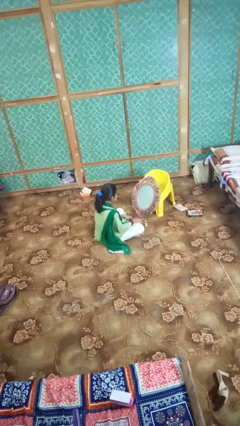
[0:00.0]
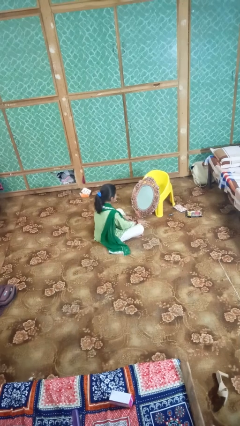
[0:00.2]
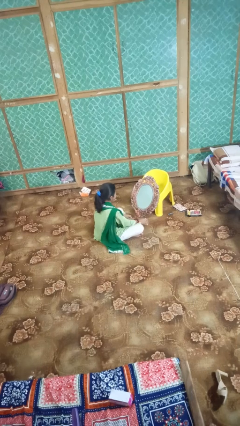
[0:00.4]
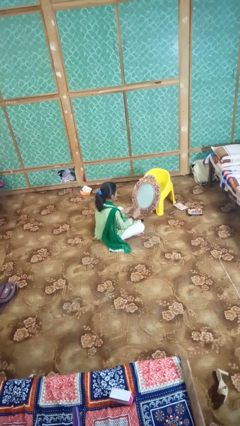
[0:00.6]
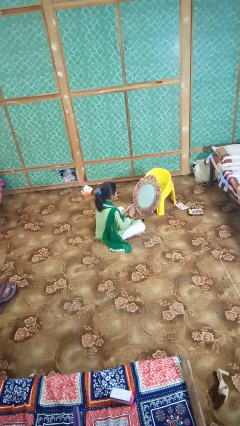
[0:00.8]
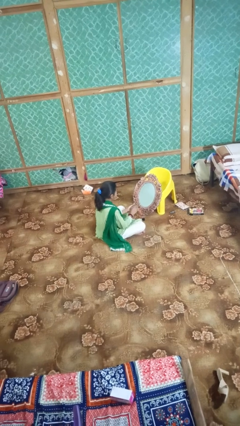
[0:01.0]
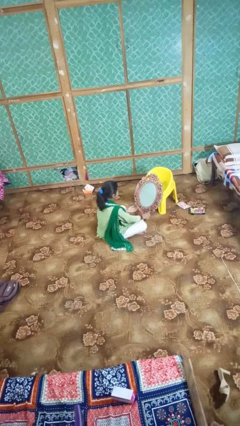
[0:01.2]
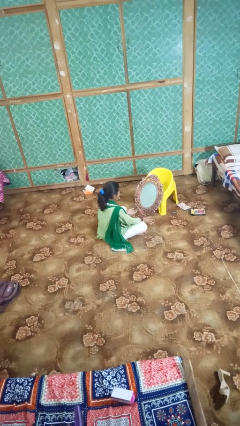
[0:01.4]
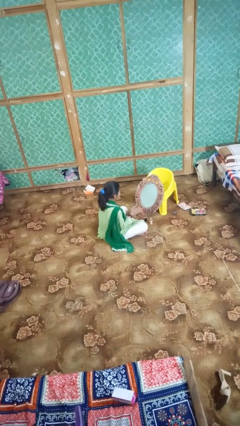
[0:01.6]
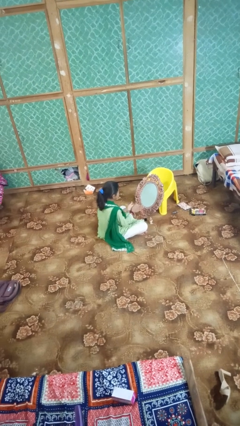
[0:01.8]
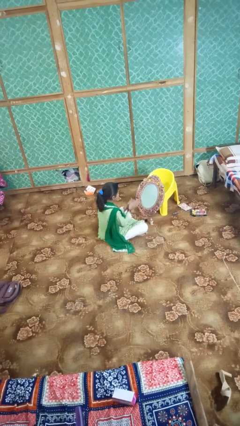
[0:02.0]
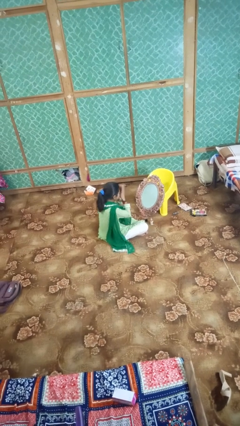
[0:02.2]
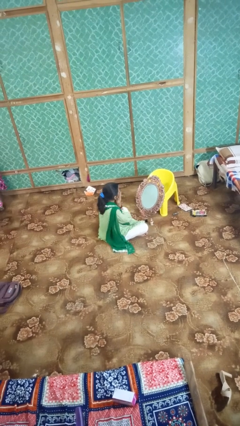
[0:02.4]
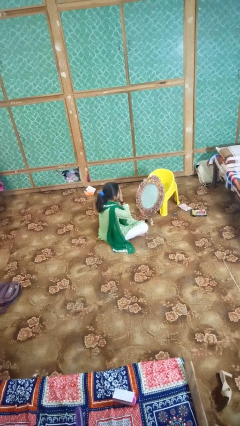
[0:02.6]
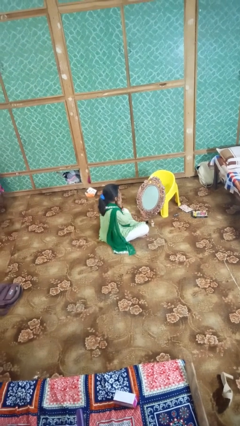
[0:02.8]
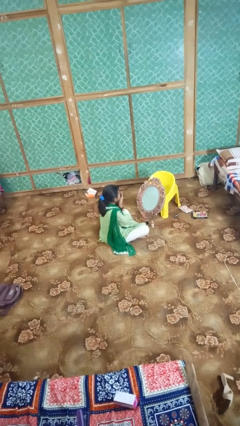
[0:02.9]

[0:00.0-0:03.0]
person applies foundation makeup

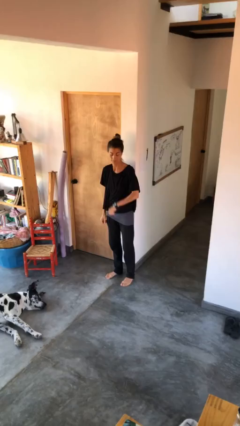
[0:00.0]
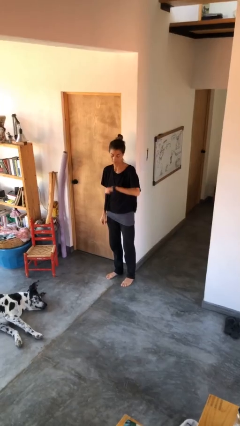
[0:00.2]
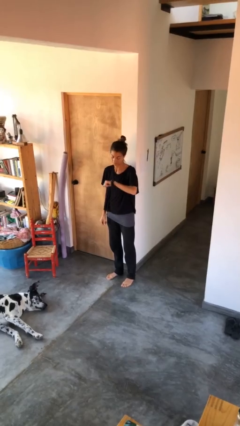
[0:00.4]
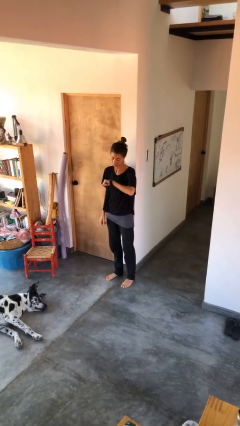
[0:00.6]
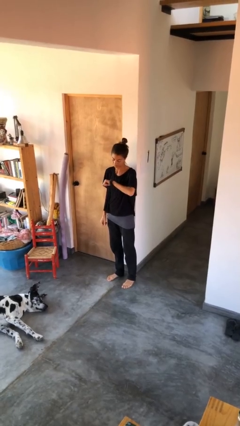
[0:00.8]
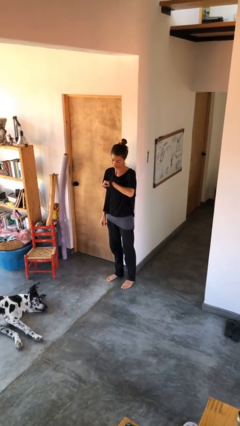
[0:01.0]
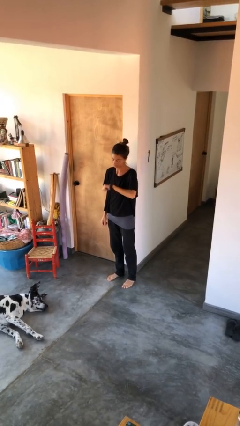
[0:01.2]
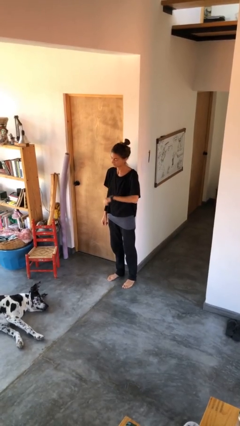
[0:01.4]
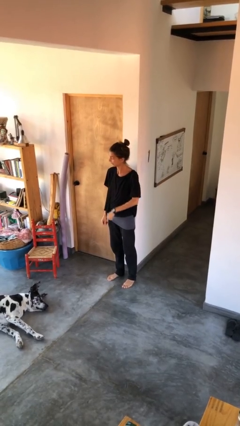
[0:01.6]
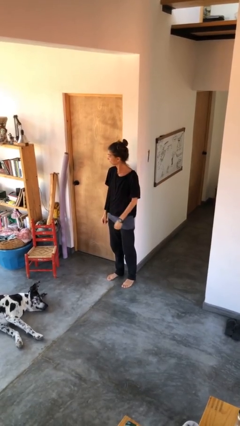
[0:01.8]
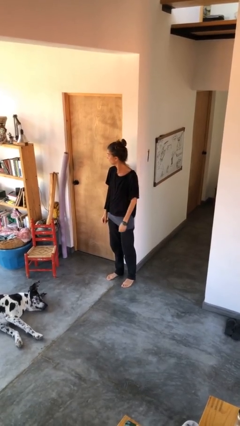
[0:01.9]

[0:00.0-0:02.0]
person looks at wristwatch

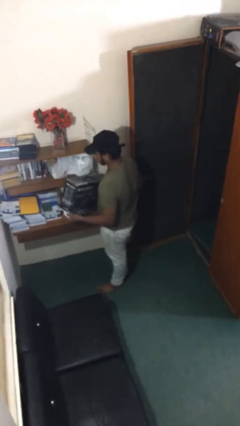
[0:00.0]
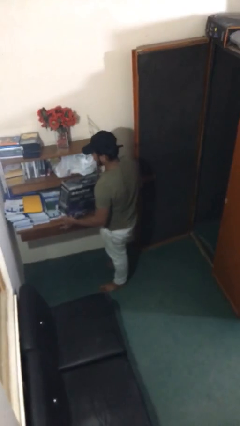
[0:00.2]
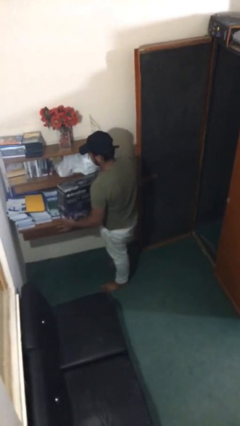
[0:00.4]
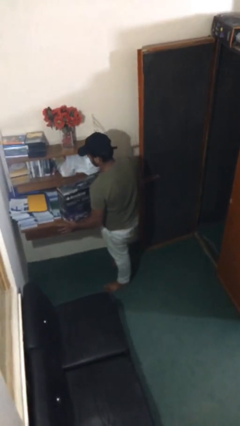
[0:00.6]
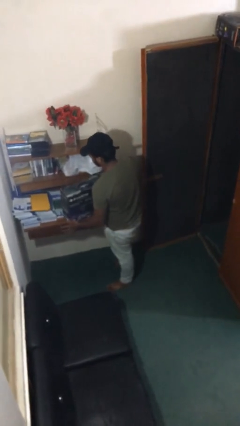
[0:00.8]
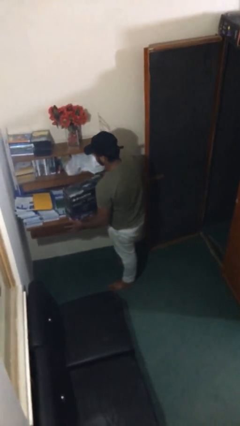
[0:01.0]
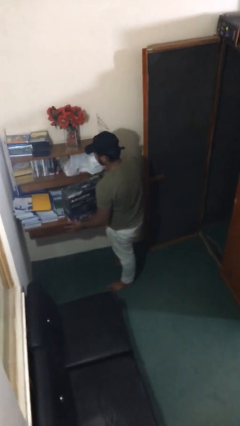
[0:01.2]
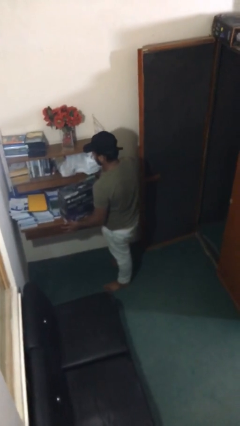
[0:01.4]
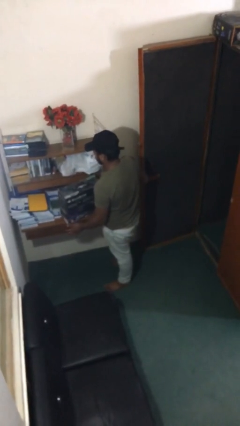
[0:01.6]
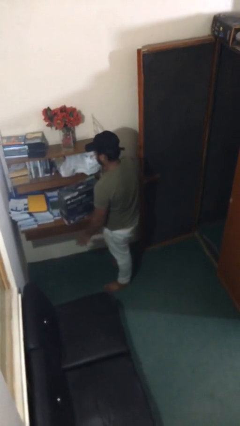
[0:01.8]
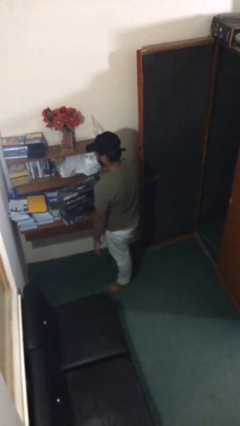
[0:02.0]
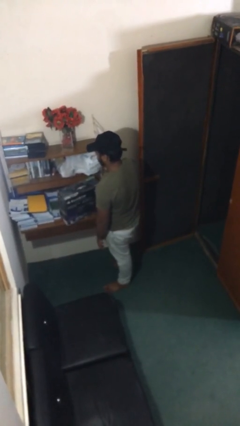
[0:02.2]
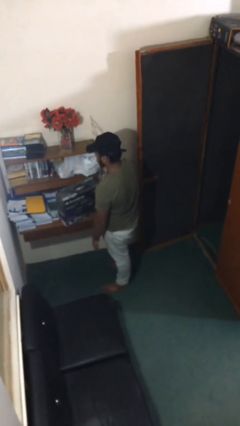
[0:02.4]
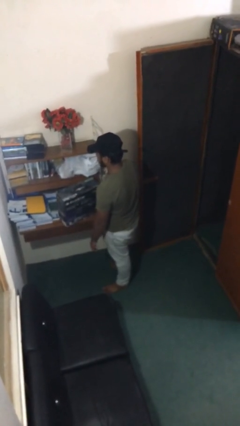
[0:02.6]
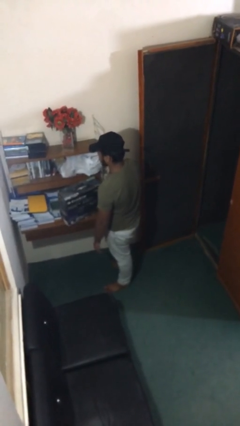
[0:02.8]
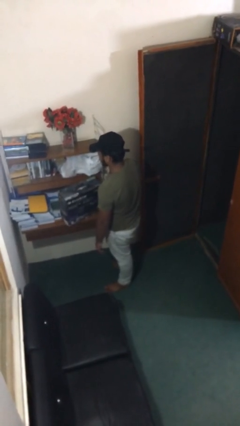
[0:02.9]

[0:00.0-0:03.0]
person puts down object on table

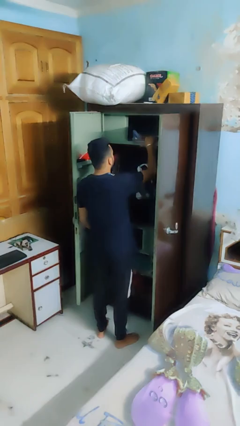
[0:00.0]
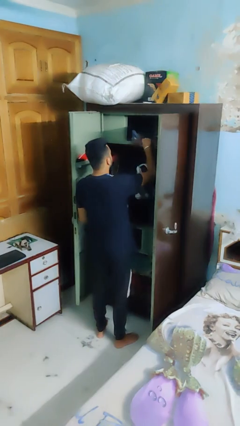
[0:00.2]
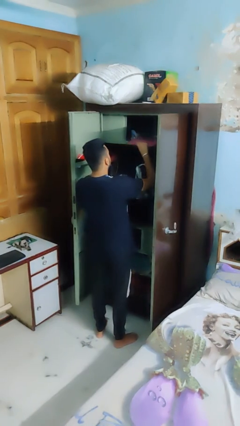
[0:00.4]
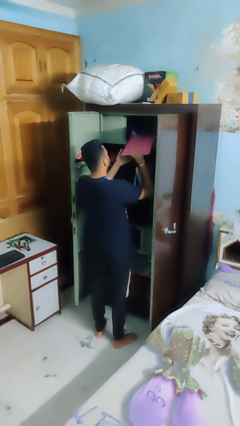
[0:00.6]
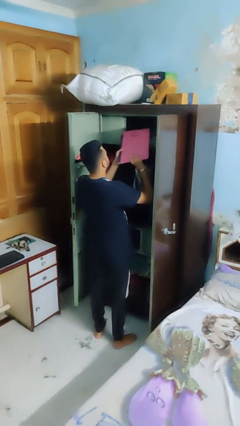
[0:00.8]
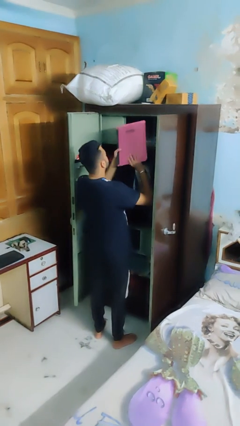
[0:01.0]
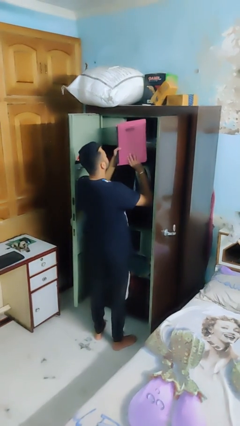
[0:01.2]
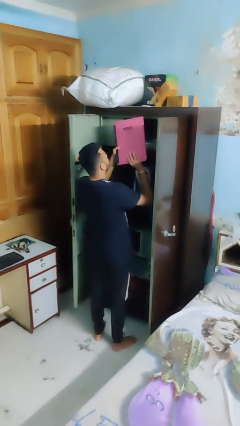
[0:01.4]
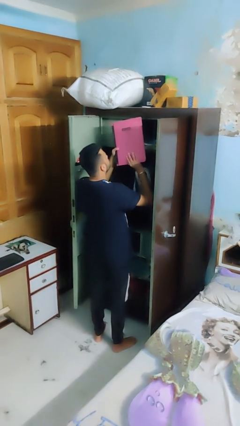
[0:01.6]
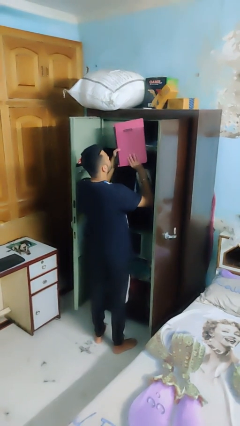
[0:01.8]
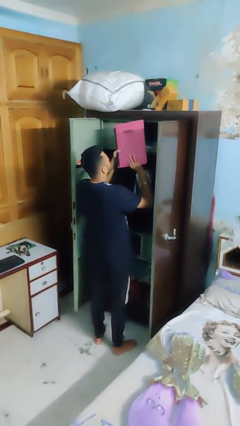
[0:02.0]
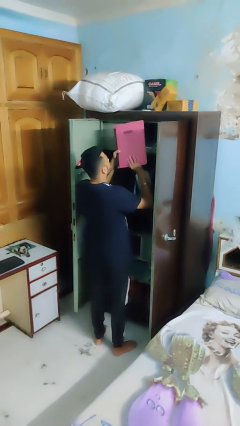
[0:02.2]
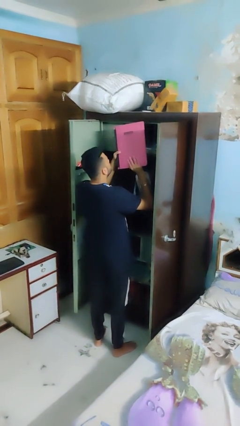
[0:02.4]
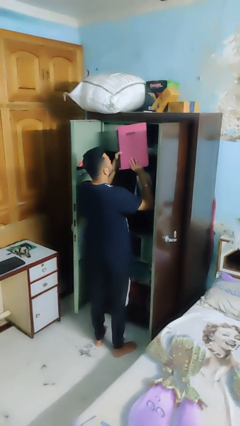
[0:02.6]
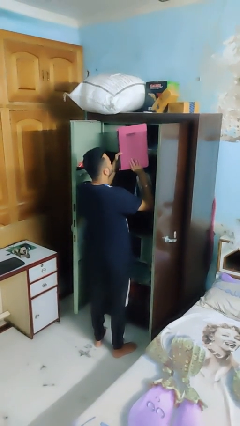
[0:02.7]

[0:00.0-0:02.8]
person picks up object from shelf

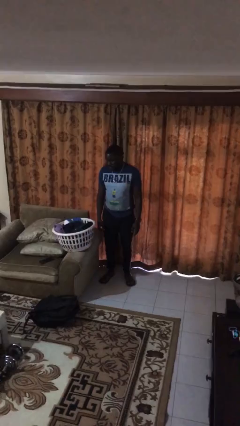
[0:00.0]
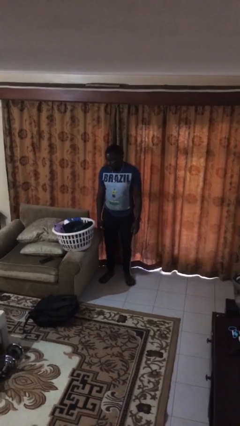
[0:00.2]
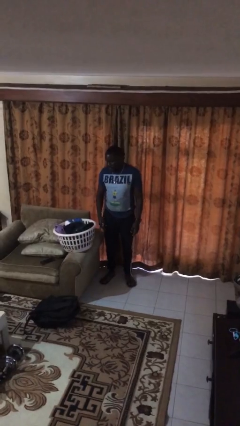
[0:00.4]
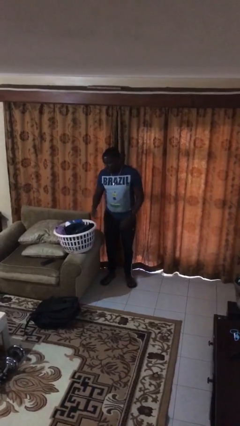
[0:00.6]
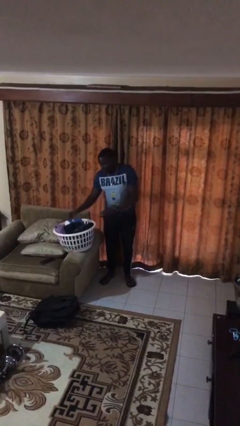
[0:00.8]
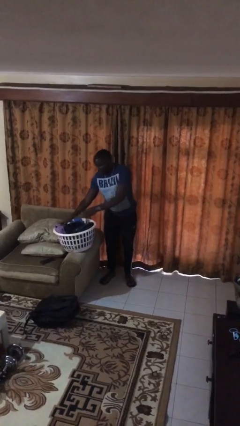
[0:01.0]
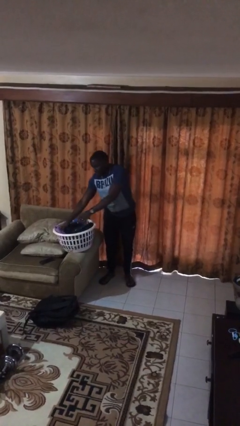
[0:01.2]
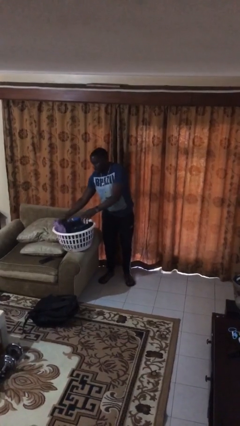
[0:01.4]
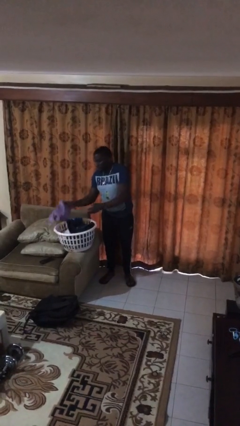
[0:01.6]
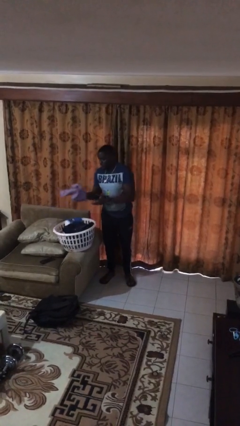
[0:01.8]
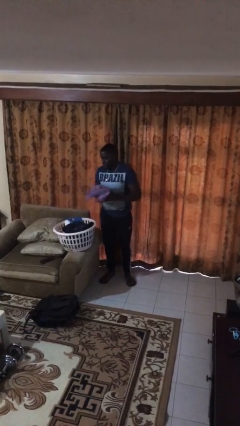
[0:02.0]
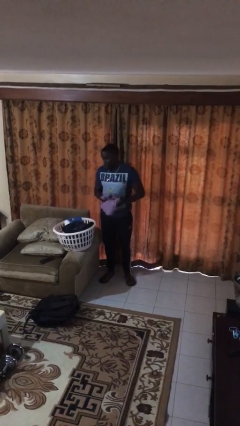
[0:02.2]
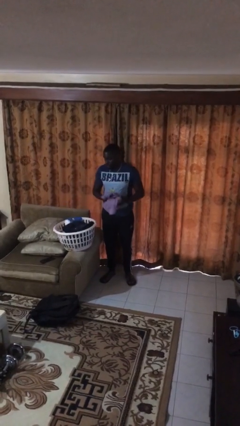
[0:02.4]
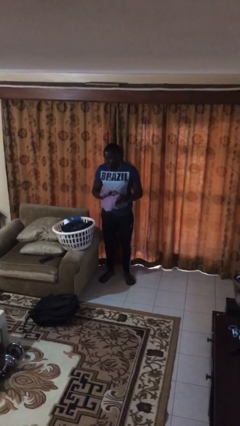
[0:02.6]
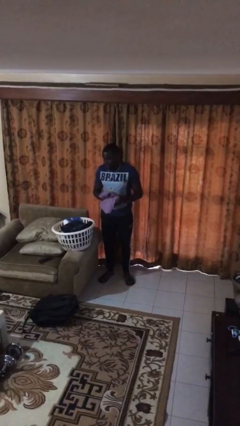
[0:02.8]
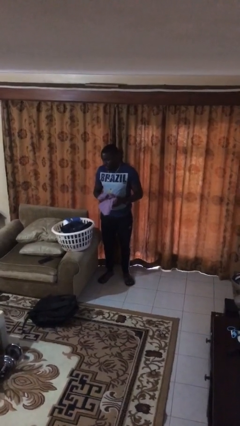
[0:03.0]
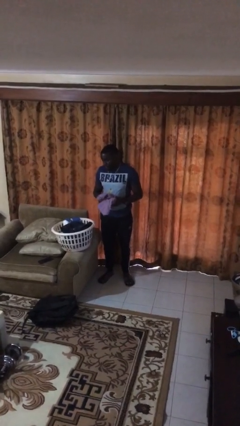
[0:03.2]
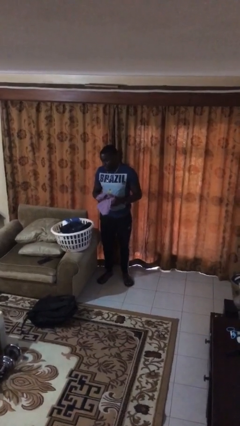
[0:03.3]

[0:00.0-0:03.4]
person takes object from basket

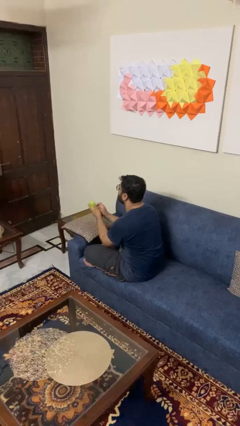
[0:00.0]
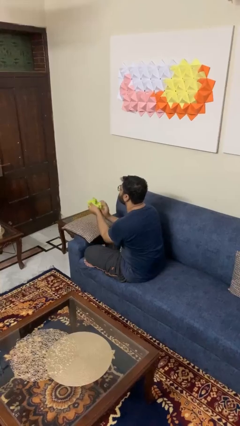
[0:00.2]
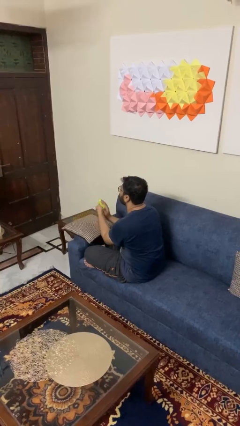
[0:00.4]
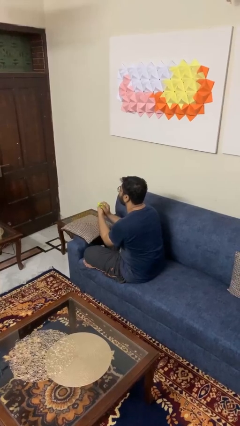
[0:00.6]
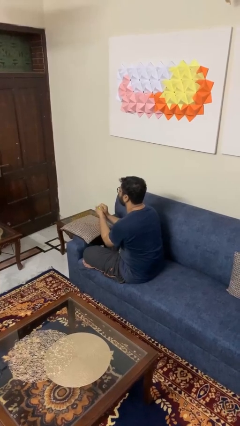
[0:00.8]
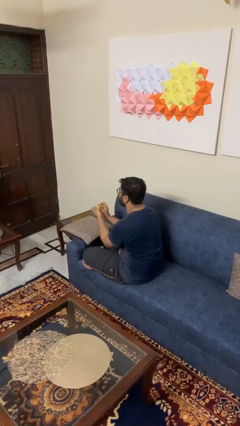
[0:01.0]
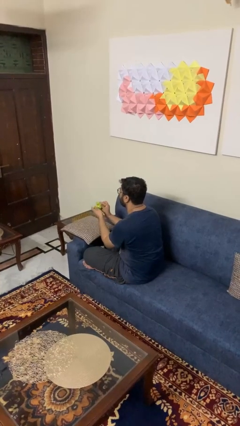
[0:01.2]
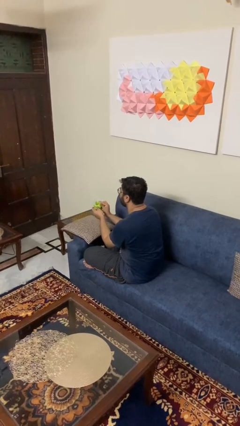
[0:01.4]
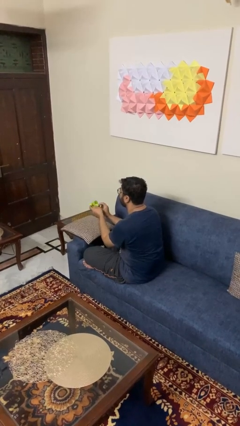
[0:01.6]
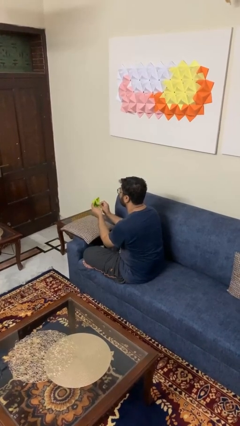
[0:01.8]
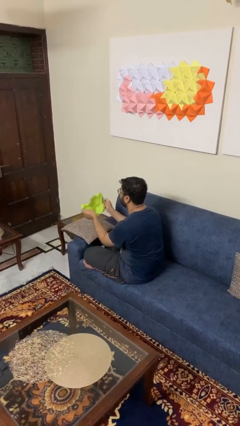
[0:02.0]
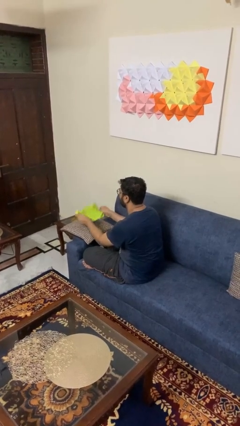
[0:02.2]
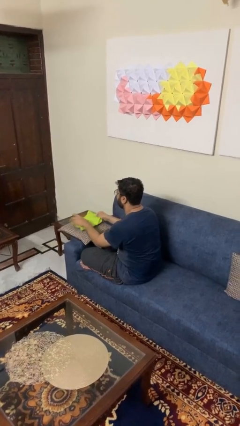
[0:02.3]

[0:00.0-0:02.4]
person crumples paper

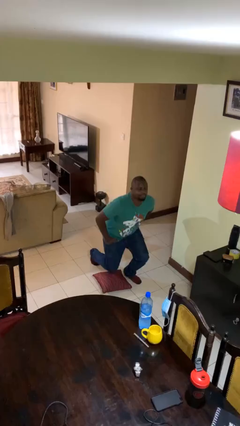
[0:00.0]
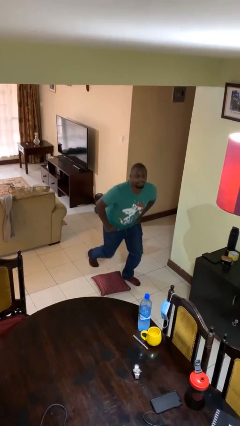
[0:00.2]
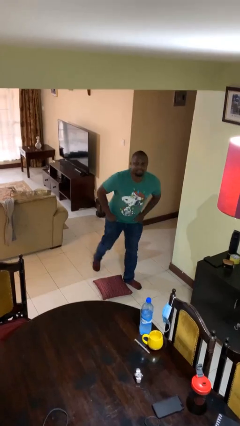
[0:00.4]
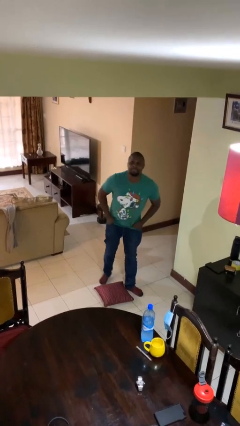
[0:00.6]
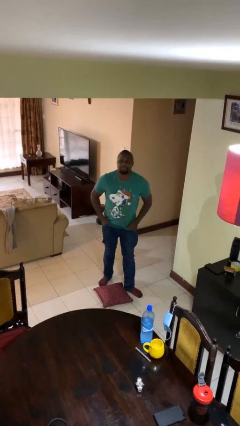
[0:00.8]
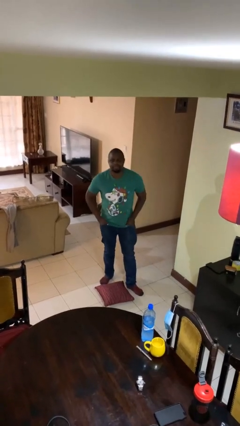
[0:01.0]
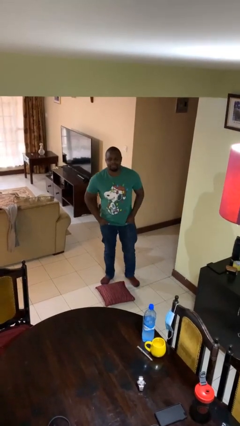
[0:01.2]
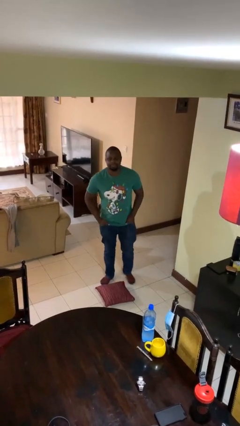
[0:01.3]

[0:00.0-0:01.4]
person stands up from floor
